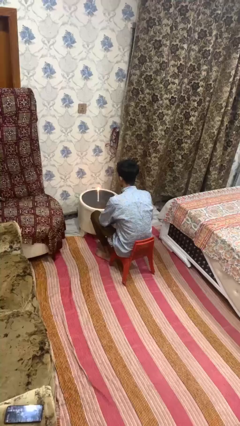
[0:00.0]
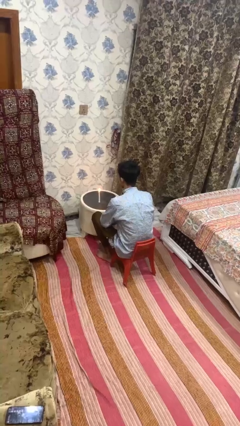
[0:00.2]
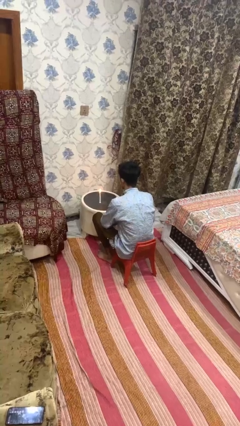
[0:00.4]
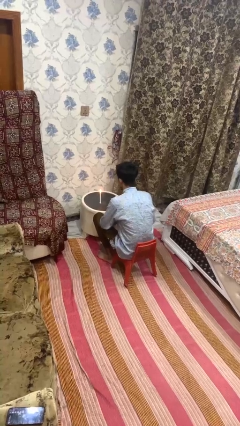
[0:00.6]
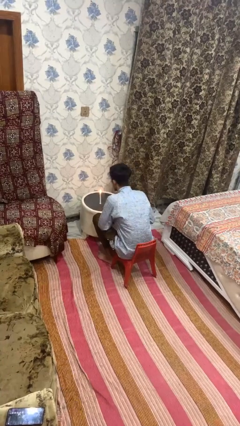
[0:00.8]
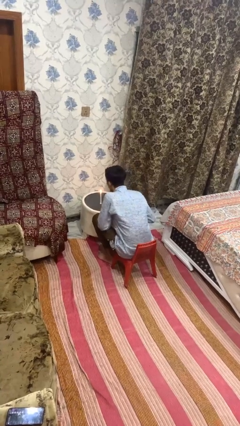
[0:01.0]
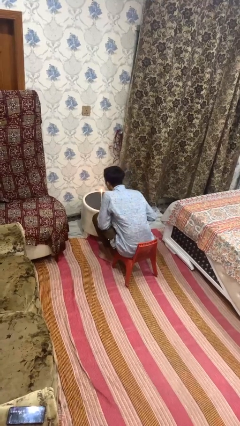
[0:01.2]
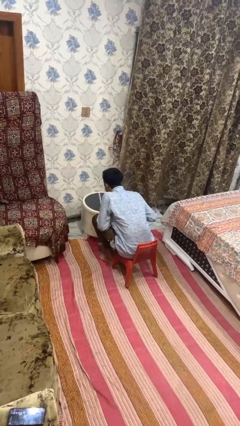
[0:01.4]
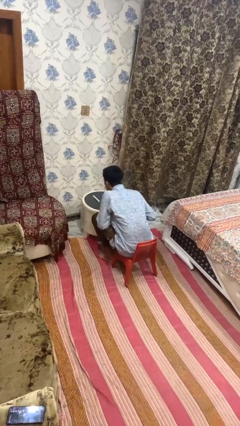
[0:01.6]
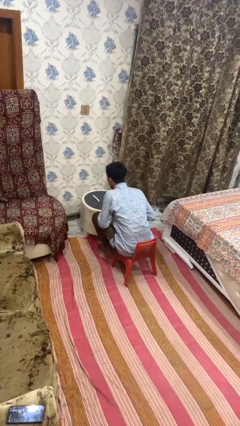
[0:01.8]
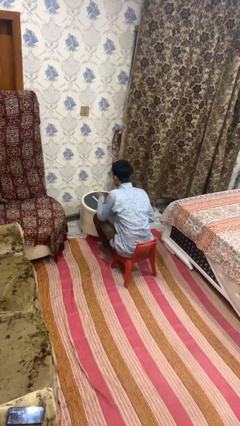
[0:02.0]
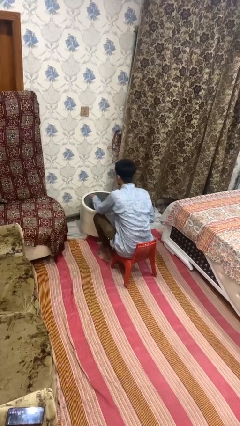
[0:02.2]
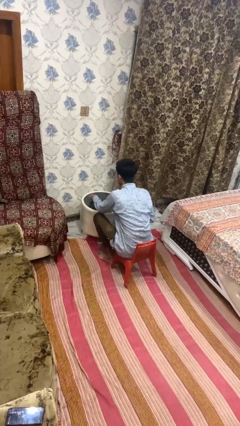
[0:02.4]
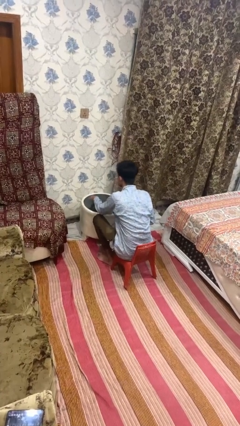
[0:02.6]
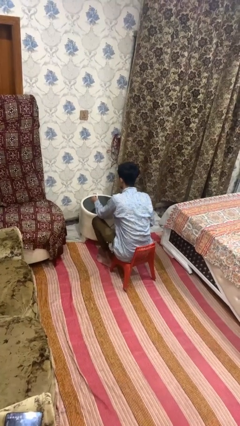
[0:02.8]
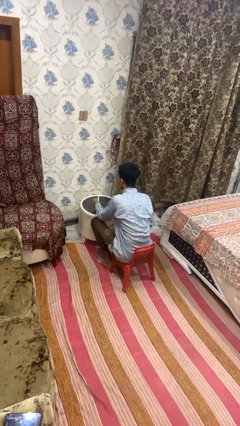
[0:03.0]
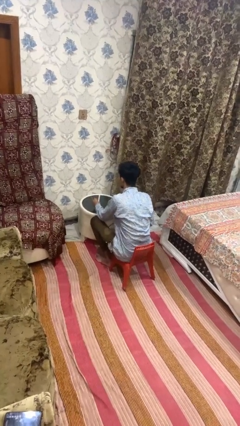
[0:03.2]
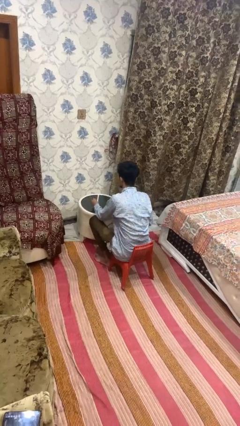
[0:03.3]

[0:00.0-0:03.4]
person extinguishes candle

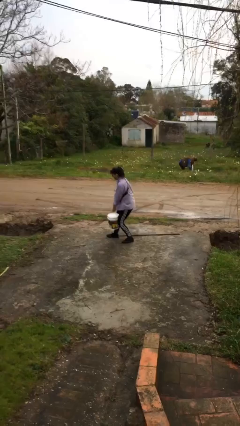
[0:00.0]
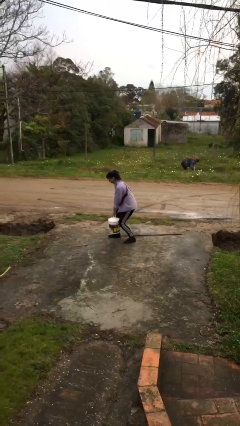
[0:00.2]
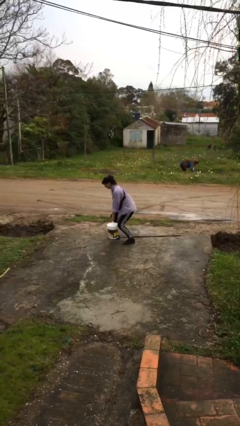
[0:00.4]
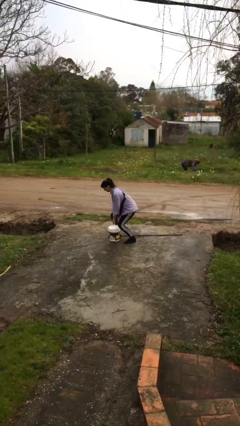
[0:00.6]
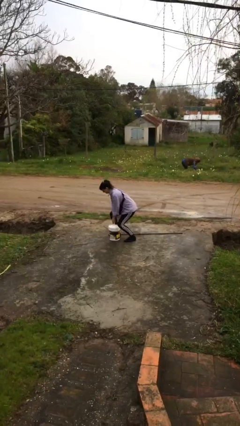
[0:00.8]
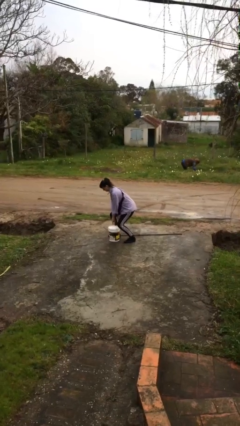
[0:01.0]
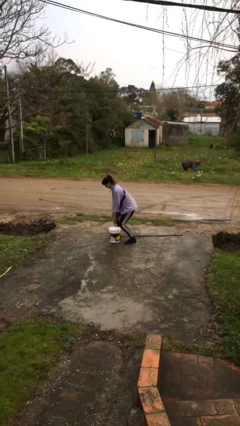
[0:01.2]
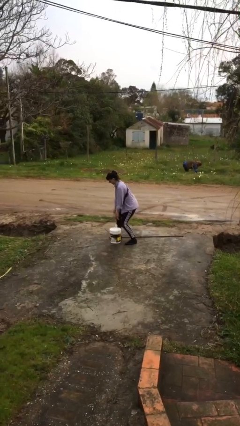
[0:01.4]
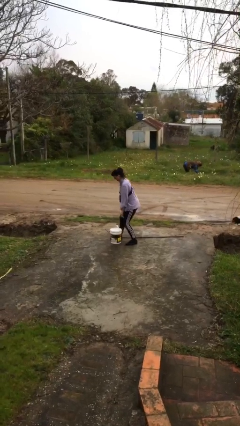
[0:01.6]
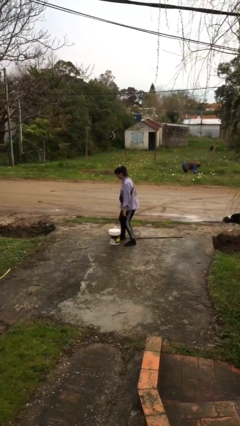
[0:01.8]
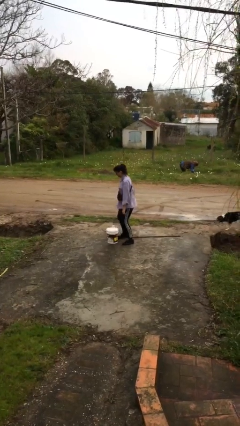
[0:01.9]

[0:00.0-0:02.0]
person puts down object on floor

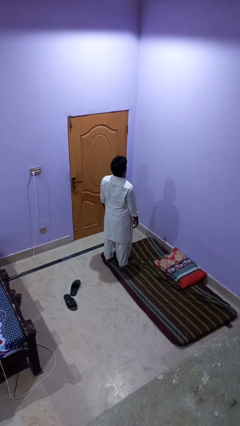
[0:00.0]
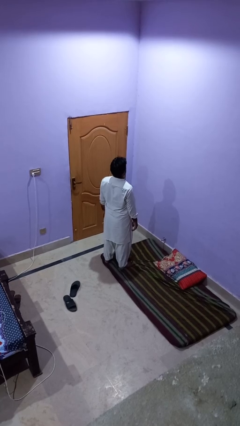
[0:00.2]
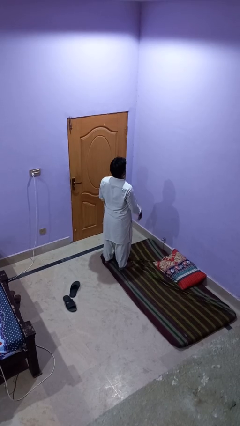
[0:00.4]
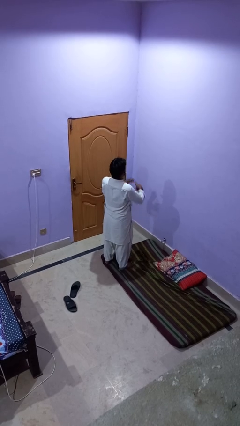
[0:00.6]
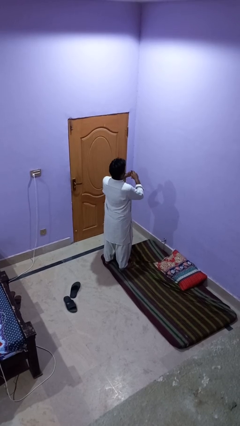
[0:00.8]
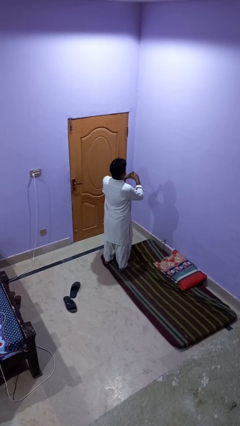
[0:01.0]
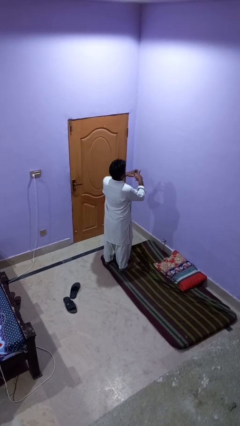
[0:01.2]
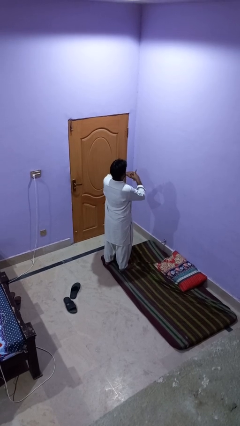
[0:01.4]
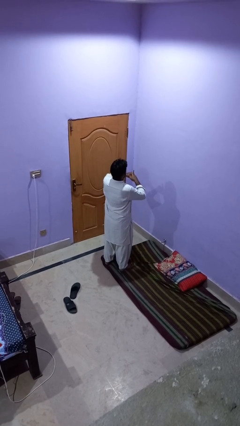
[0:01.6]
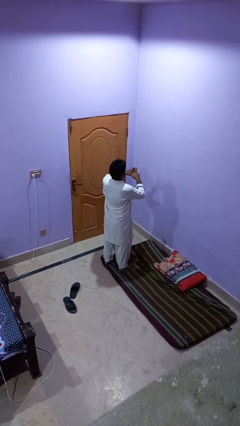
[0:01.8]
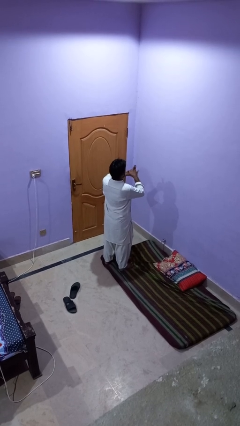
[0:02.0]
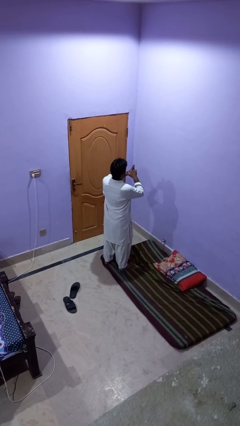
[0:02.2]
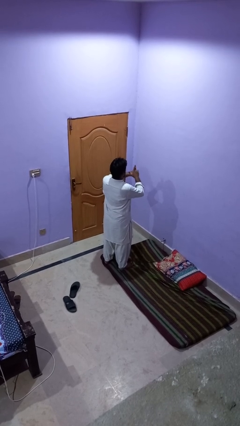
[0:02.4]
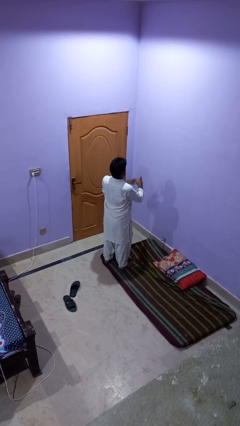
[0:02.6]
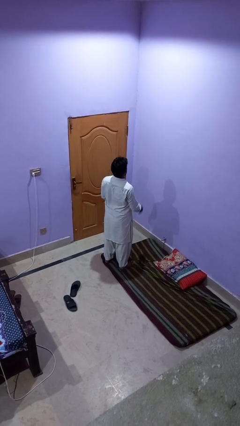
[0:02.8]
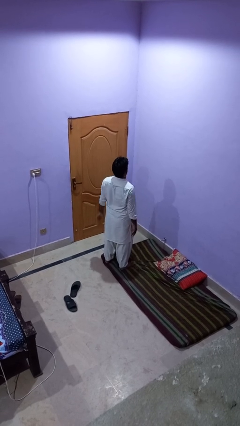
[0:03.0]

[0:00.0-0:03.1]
person snaps fingers

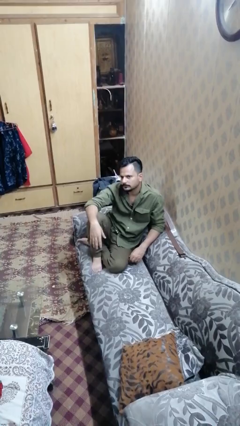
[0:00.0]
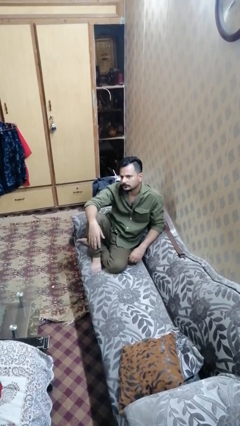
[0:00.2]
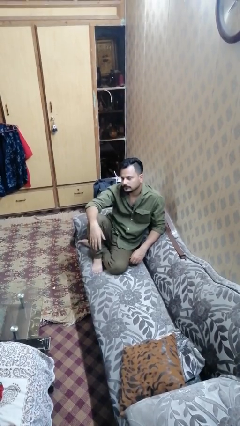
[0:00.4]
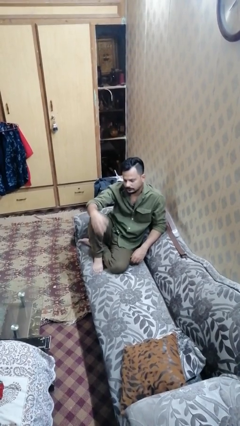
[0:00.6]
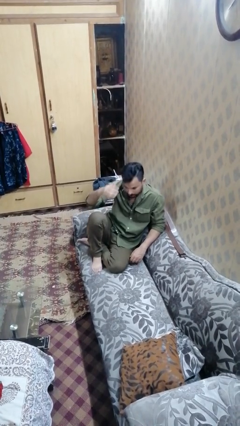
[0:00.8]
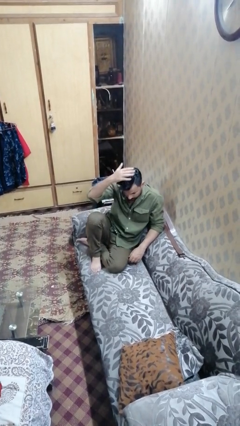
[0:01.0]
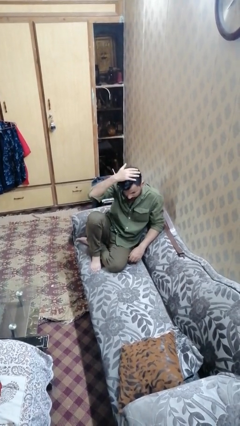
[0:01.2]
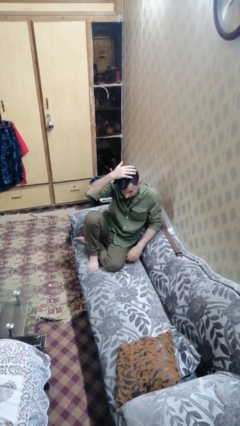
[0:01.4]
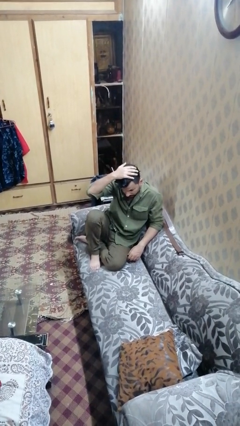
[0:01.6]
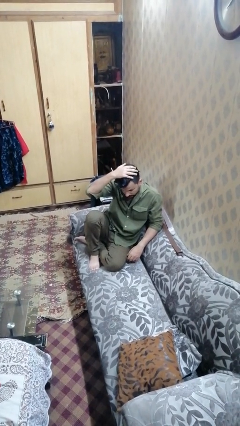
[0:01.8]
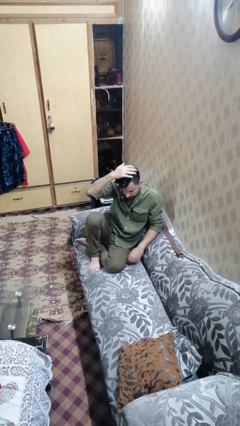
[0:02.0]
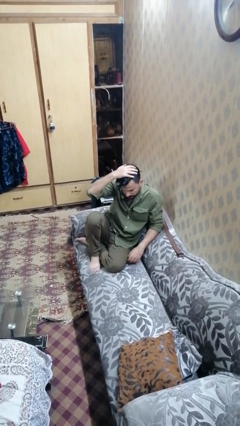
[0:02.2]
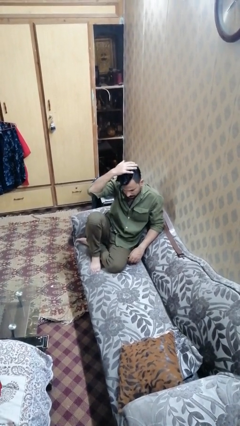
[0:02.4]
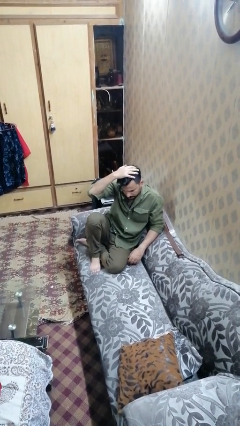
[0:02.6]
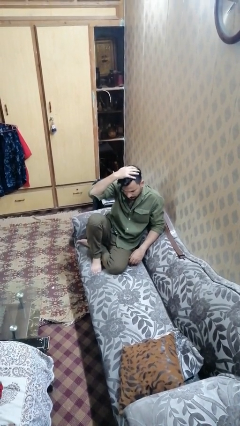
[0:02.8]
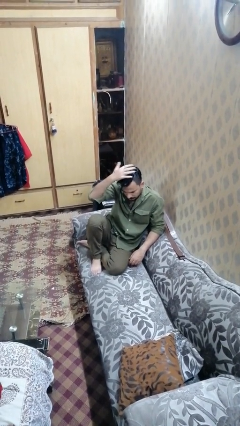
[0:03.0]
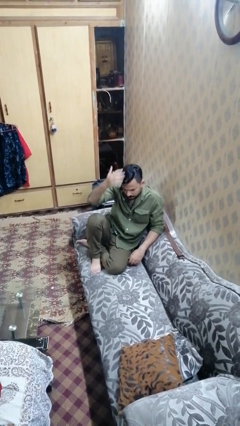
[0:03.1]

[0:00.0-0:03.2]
person pats head

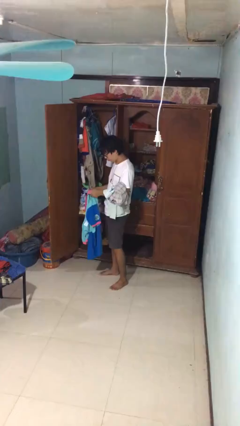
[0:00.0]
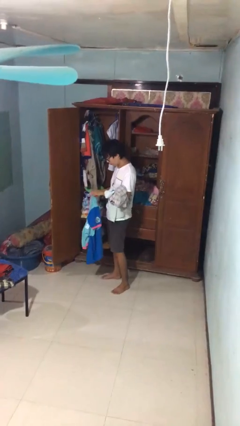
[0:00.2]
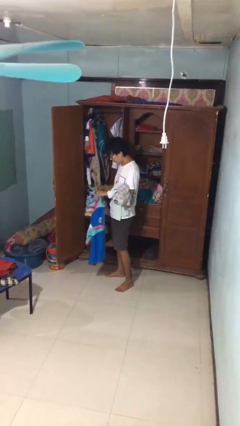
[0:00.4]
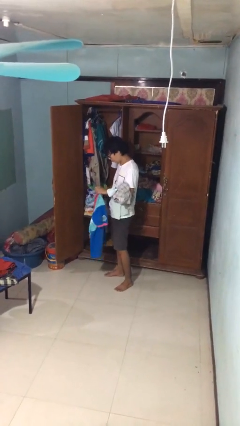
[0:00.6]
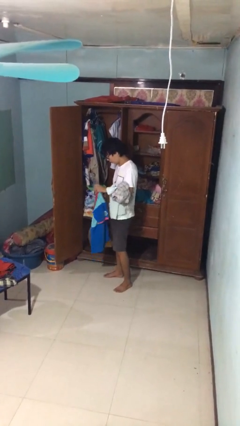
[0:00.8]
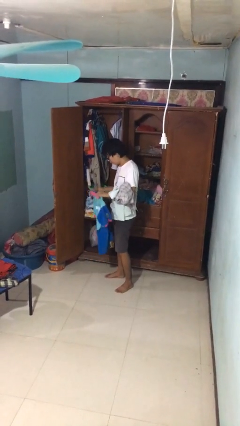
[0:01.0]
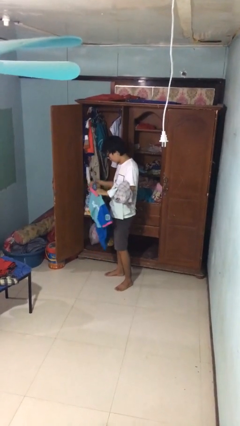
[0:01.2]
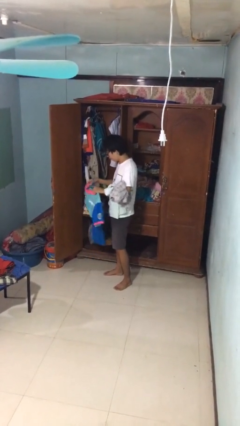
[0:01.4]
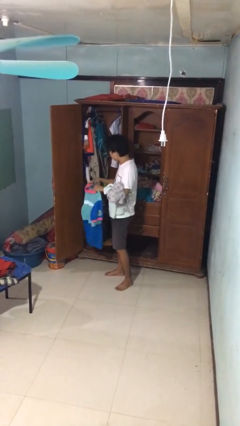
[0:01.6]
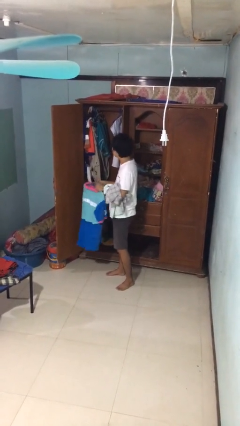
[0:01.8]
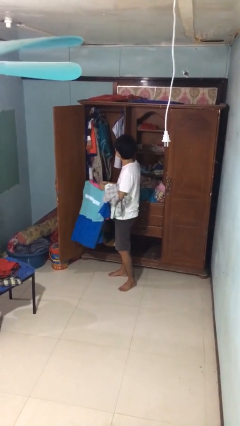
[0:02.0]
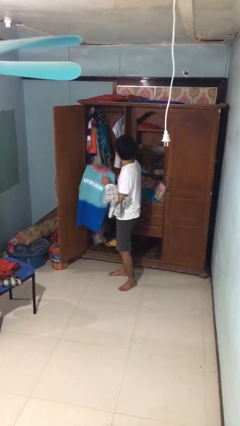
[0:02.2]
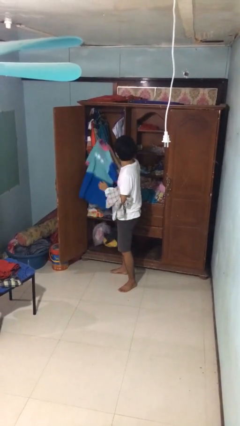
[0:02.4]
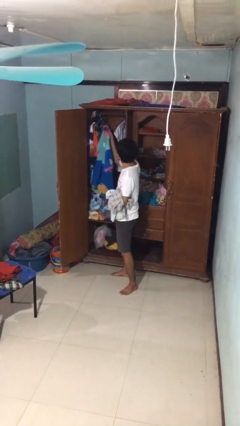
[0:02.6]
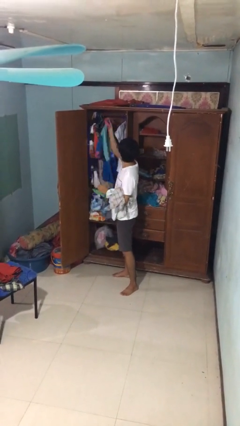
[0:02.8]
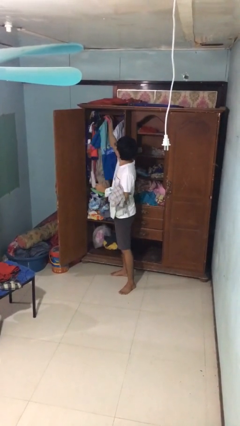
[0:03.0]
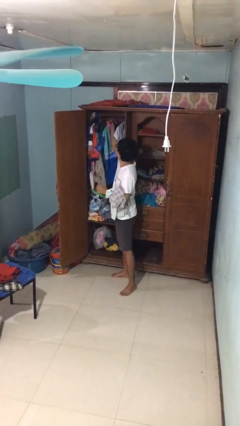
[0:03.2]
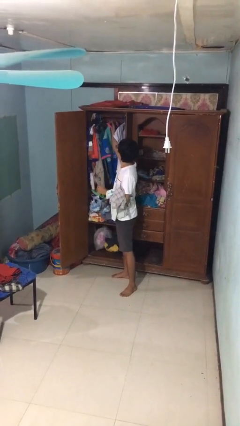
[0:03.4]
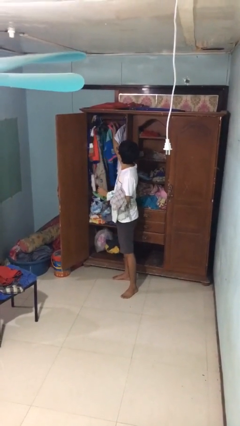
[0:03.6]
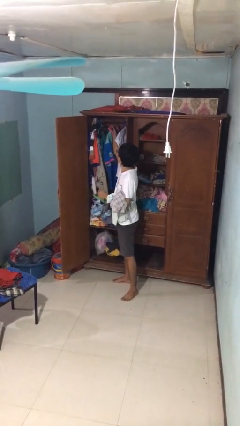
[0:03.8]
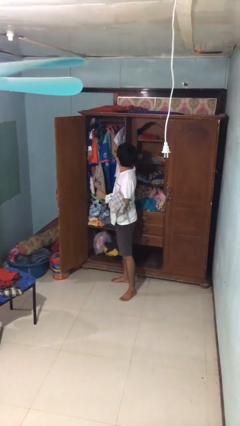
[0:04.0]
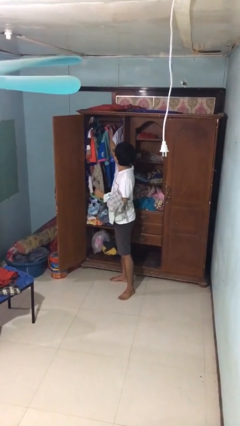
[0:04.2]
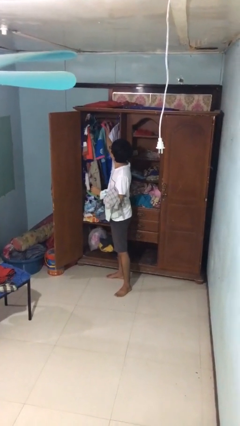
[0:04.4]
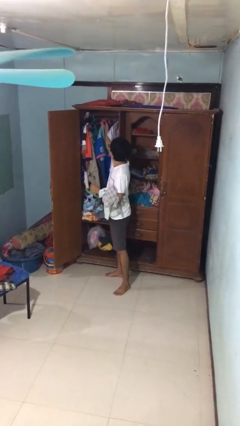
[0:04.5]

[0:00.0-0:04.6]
person puts clothes into closet

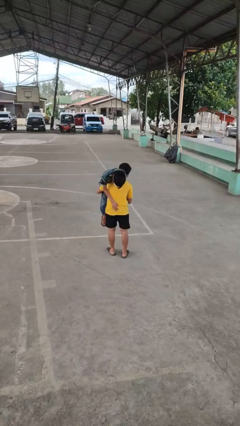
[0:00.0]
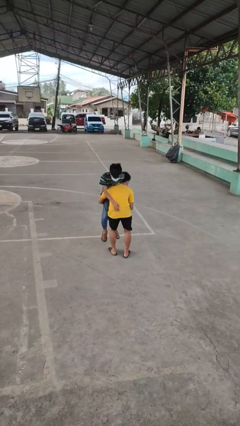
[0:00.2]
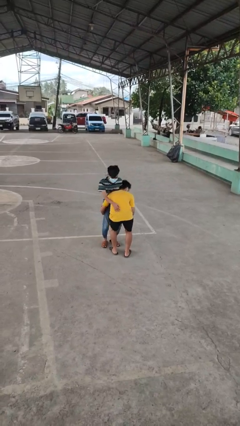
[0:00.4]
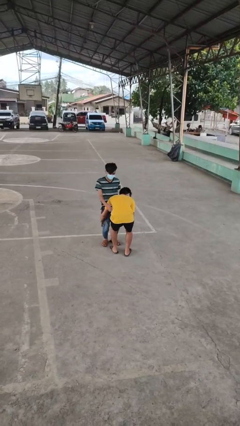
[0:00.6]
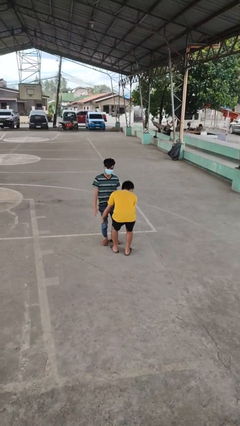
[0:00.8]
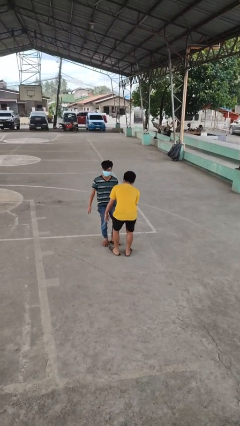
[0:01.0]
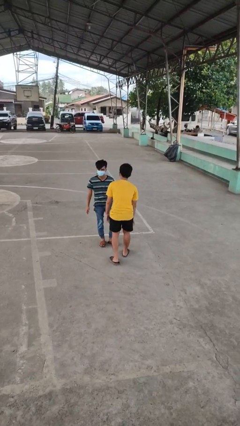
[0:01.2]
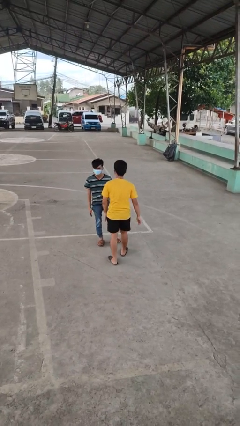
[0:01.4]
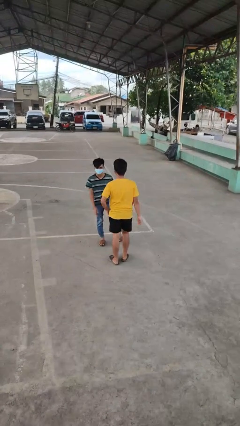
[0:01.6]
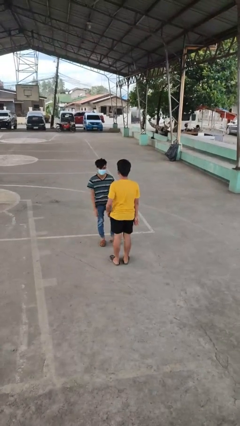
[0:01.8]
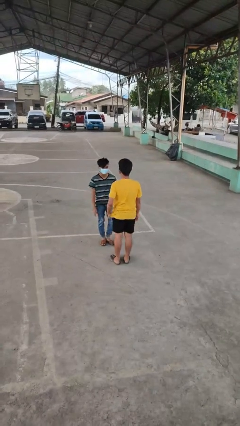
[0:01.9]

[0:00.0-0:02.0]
person puts down person
